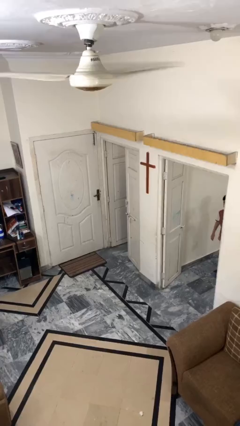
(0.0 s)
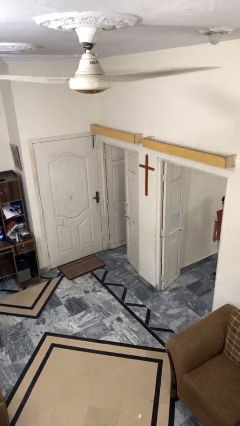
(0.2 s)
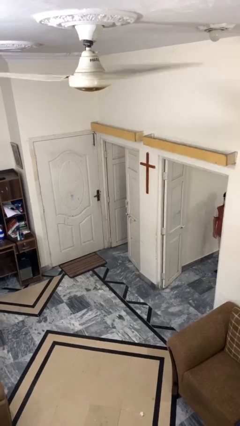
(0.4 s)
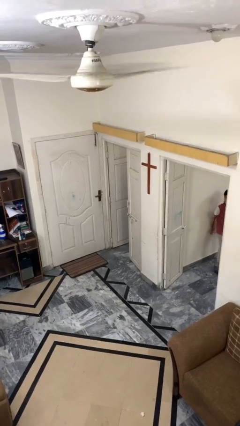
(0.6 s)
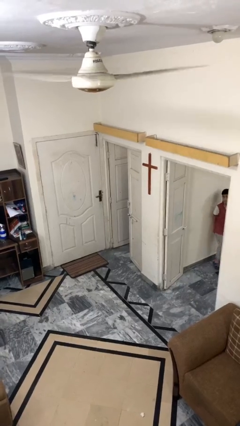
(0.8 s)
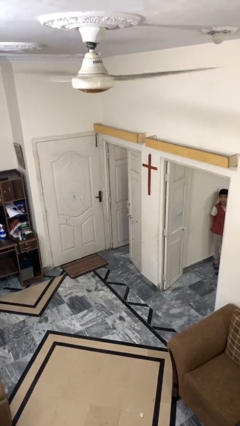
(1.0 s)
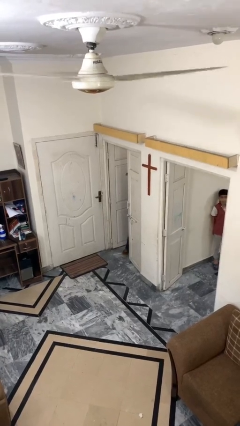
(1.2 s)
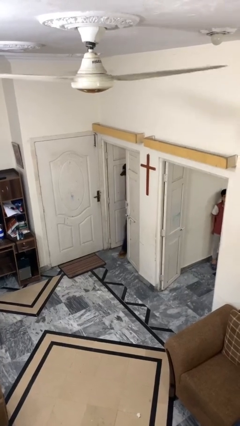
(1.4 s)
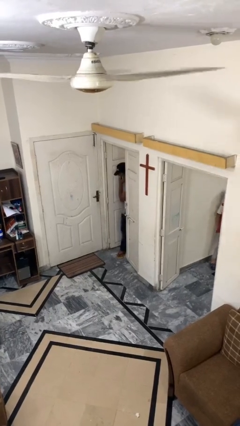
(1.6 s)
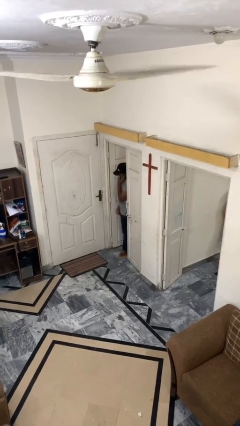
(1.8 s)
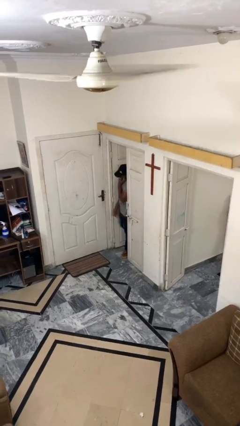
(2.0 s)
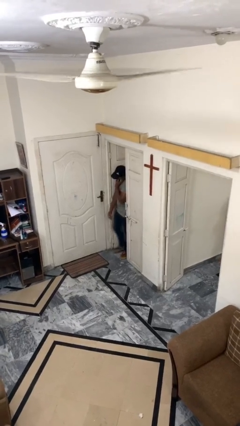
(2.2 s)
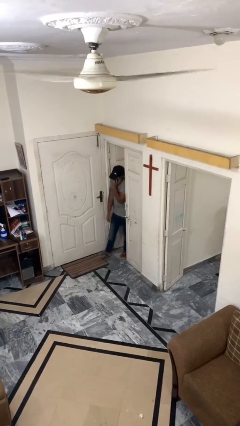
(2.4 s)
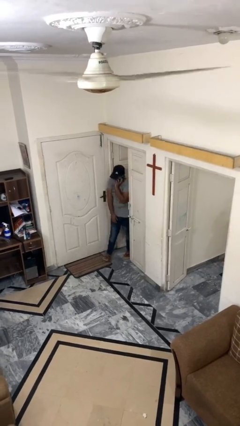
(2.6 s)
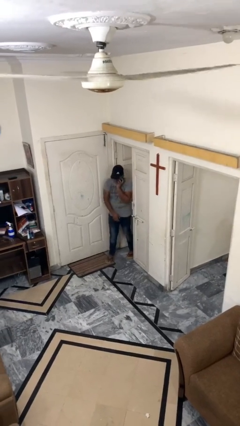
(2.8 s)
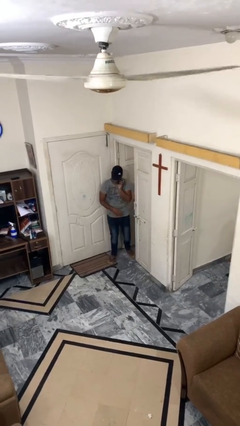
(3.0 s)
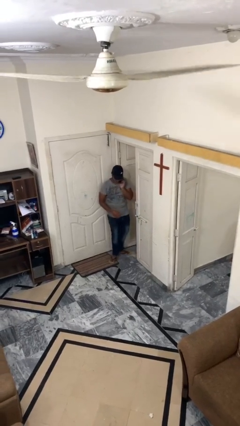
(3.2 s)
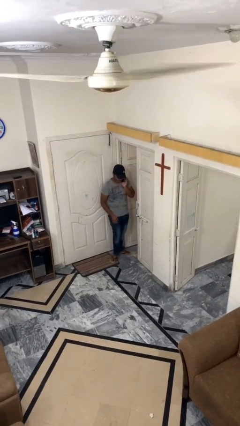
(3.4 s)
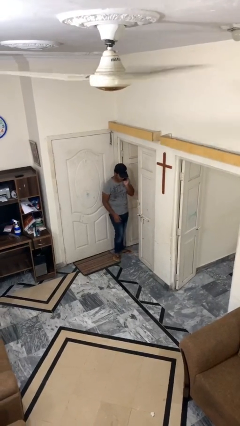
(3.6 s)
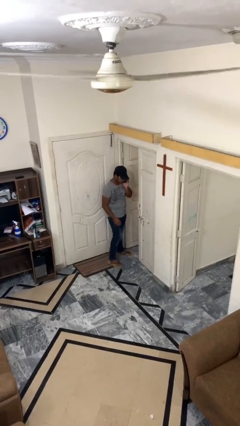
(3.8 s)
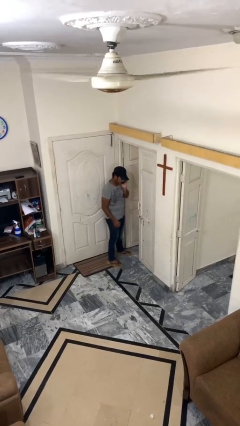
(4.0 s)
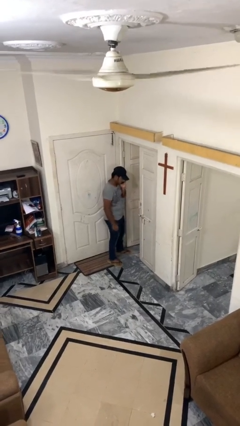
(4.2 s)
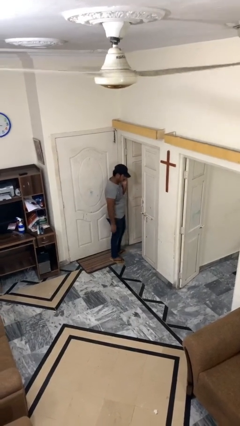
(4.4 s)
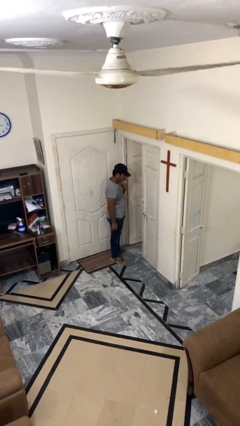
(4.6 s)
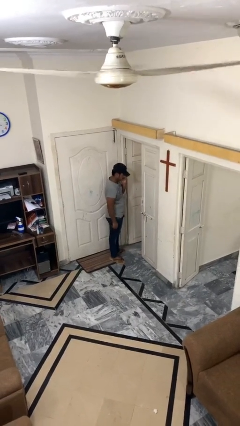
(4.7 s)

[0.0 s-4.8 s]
person enters scene through structure

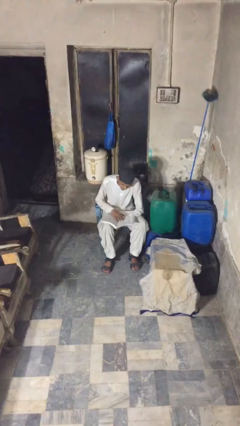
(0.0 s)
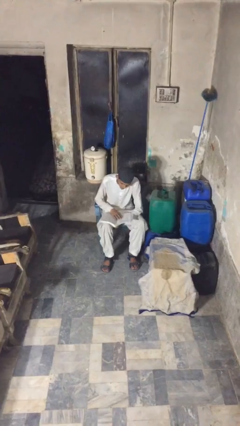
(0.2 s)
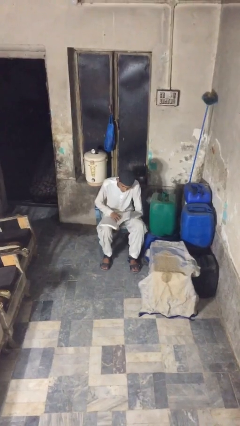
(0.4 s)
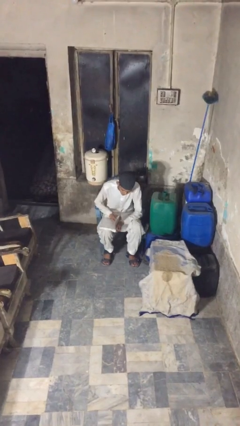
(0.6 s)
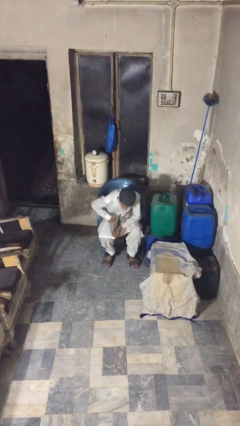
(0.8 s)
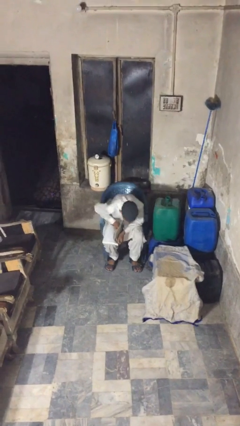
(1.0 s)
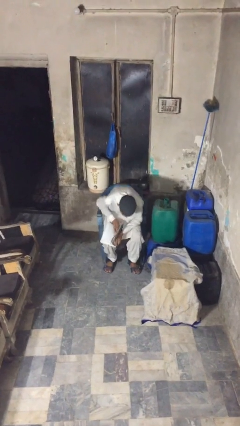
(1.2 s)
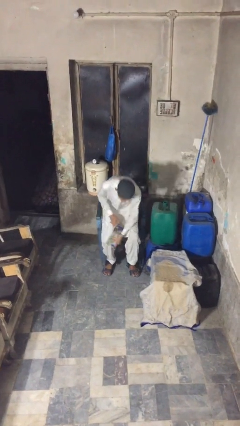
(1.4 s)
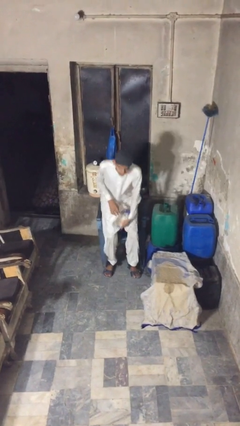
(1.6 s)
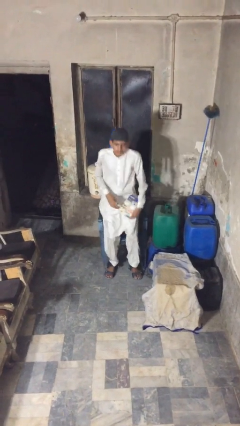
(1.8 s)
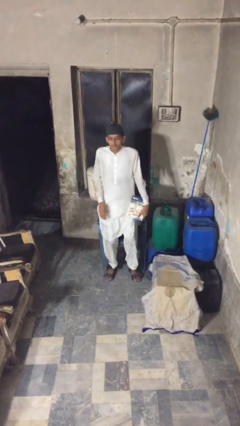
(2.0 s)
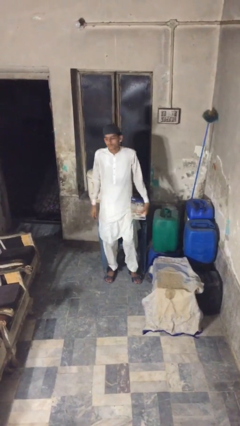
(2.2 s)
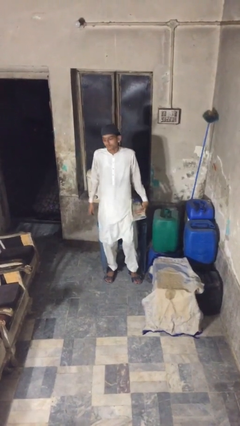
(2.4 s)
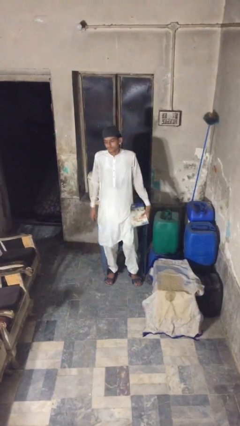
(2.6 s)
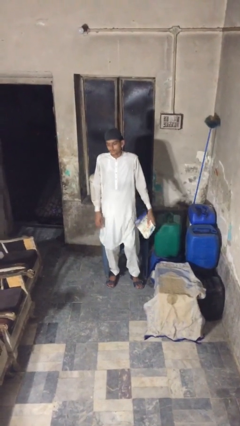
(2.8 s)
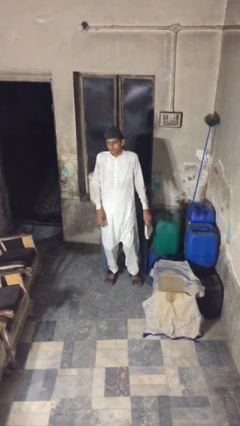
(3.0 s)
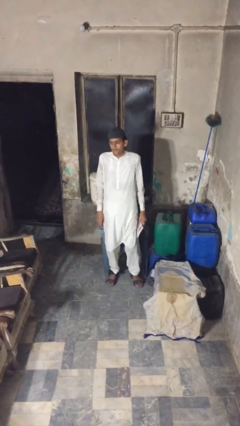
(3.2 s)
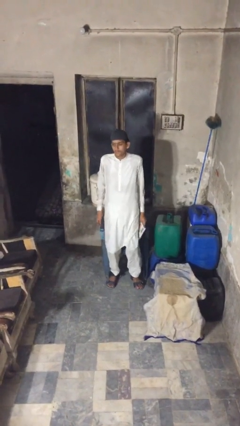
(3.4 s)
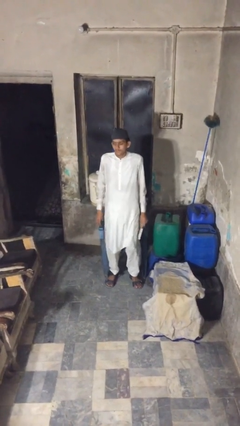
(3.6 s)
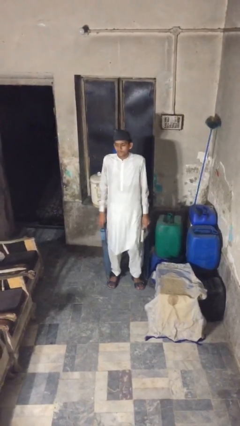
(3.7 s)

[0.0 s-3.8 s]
person stands up

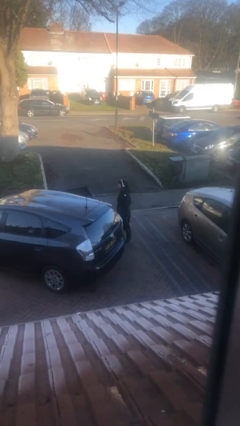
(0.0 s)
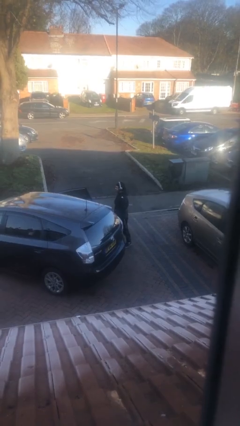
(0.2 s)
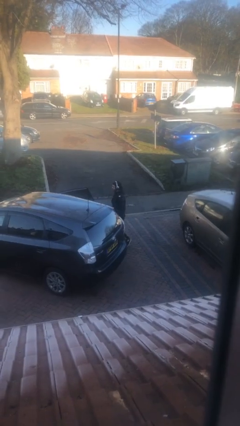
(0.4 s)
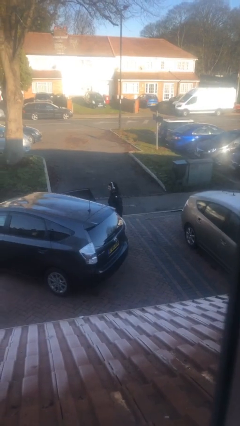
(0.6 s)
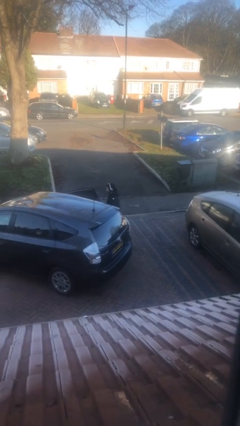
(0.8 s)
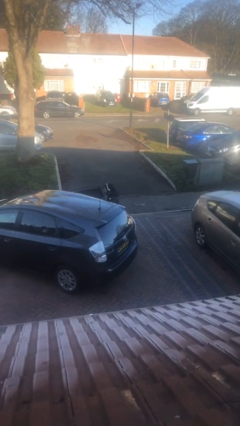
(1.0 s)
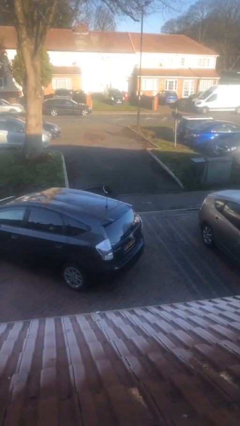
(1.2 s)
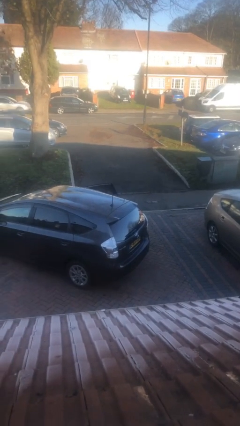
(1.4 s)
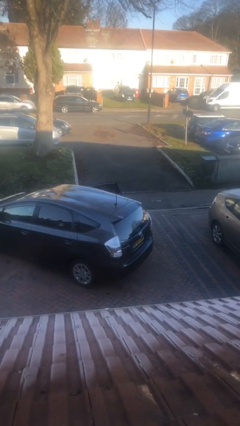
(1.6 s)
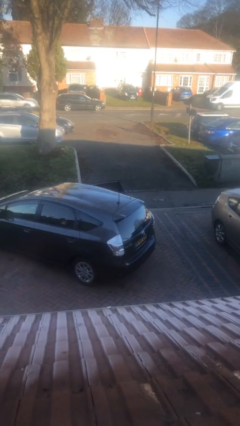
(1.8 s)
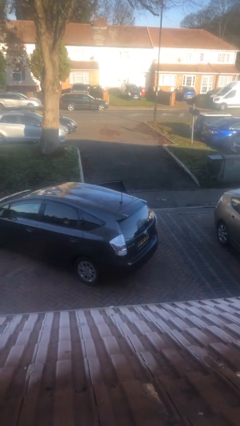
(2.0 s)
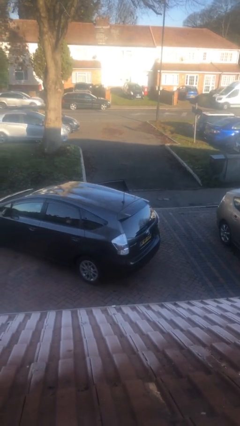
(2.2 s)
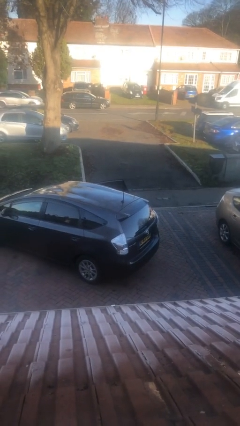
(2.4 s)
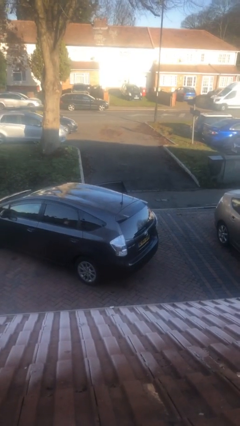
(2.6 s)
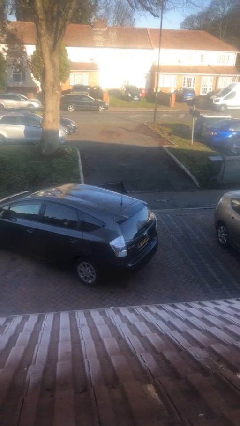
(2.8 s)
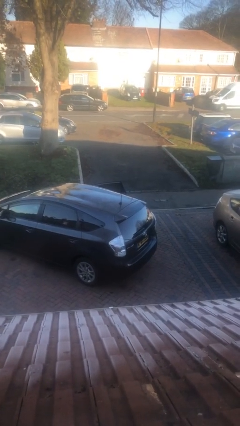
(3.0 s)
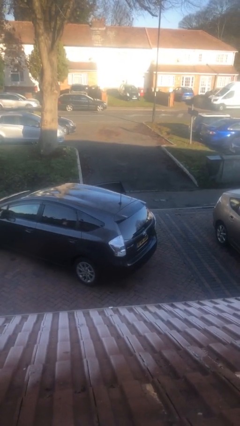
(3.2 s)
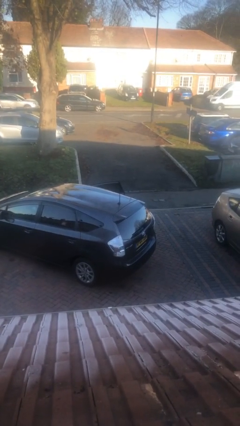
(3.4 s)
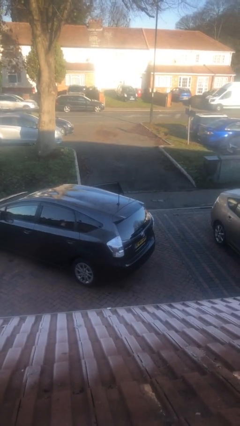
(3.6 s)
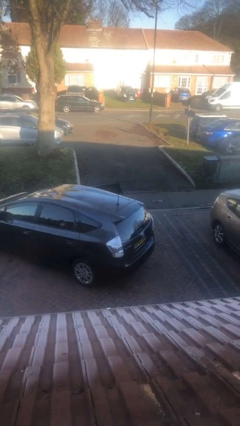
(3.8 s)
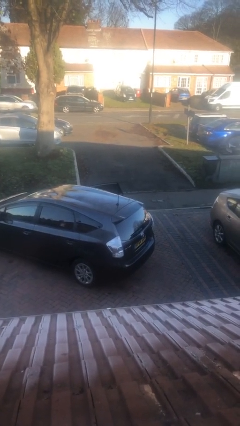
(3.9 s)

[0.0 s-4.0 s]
person enters car

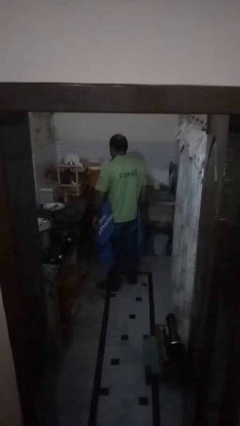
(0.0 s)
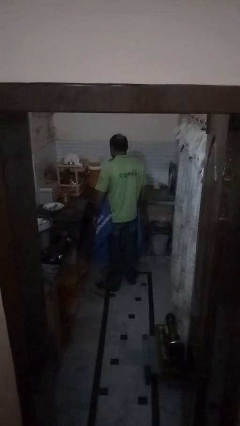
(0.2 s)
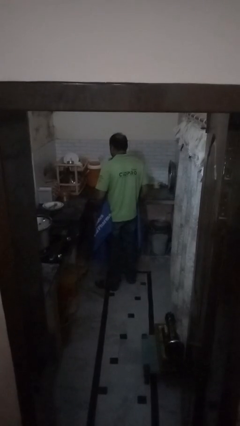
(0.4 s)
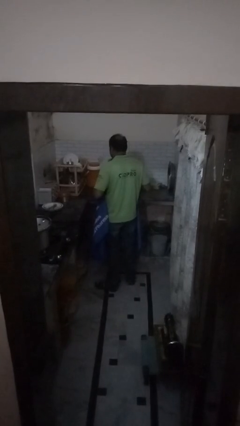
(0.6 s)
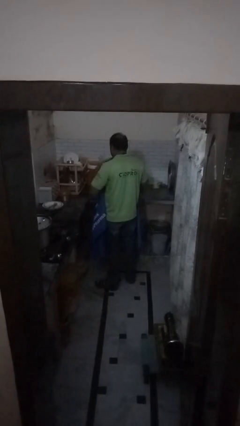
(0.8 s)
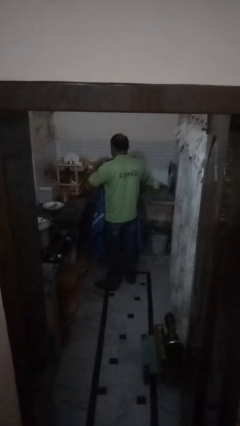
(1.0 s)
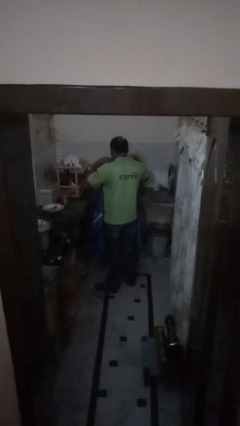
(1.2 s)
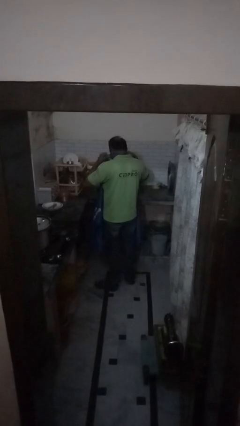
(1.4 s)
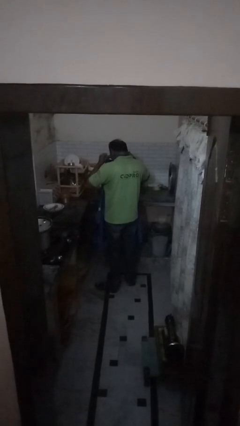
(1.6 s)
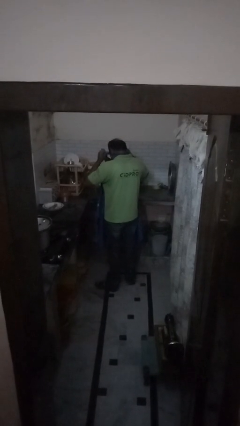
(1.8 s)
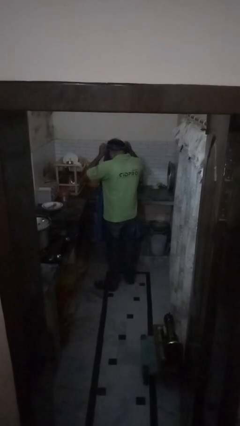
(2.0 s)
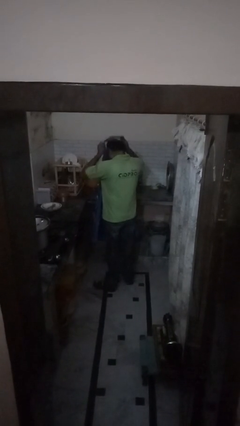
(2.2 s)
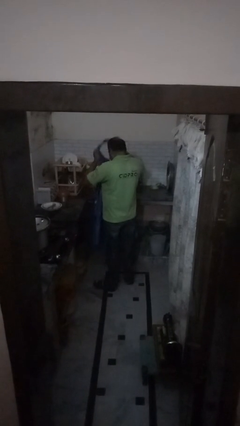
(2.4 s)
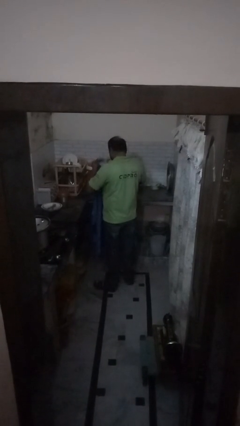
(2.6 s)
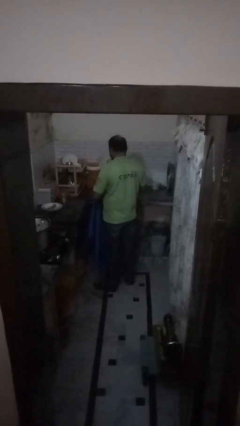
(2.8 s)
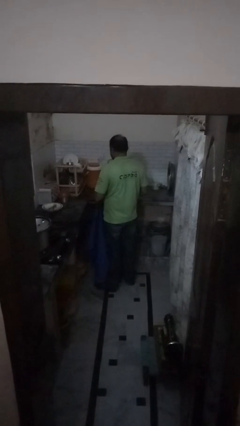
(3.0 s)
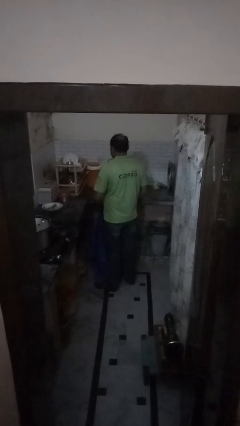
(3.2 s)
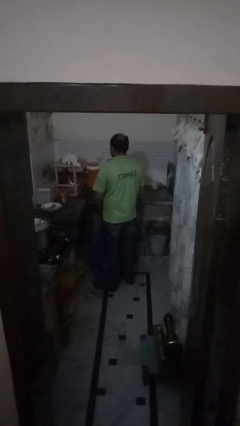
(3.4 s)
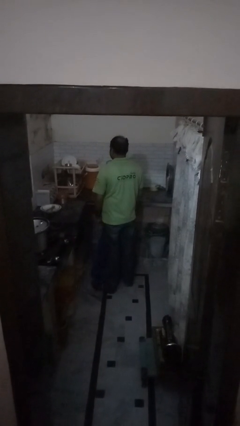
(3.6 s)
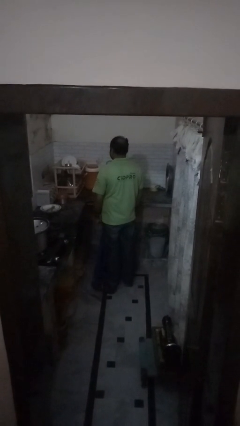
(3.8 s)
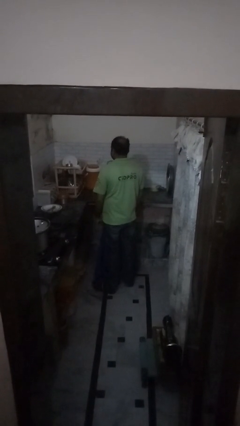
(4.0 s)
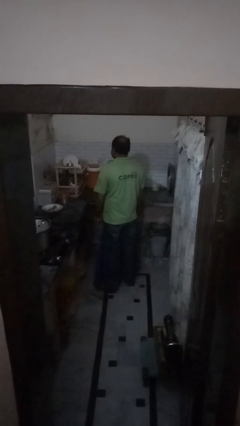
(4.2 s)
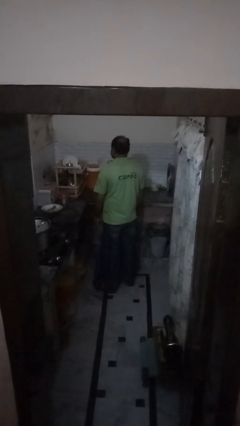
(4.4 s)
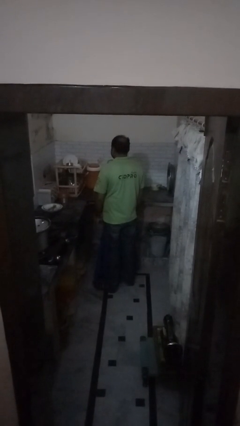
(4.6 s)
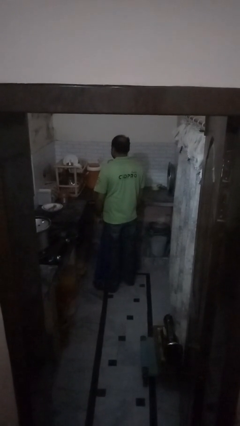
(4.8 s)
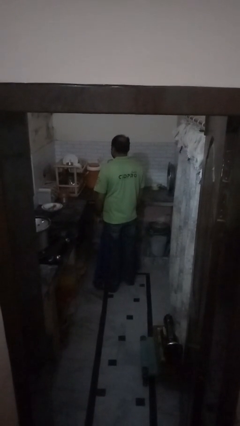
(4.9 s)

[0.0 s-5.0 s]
person takes off apron

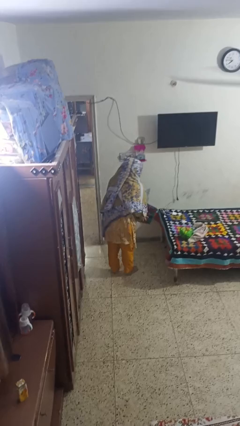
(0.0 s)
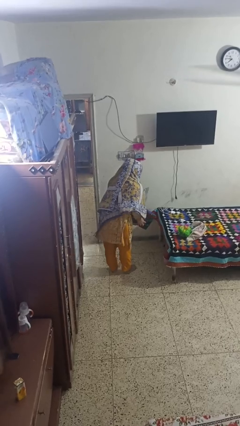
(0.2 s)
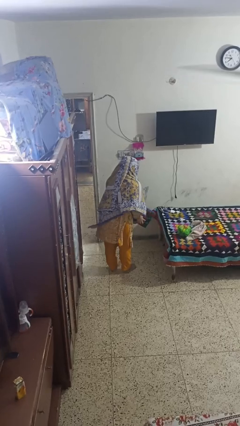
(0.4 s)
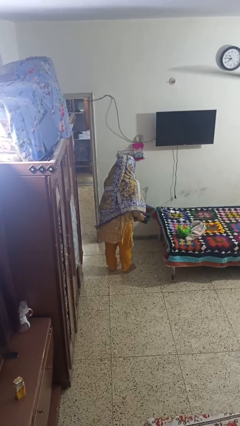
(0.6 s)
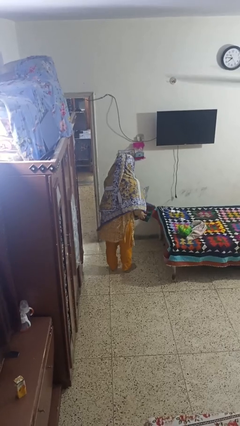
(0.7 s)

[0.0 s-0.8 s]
person catches dropped object
